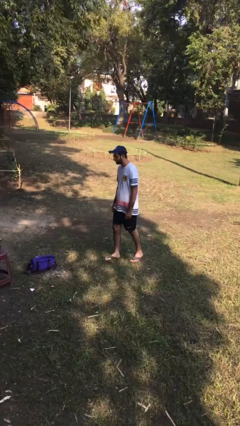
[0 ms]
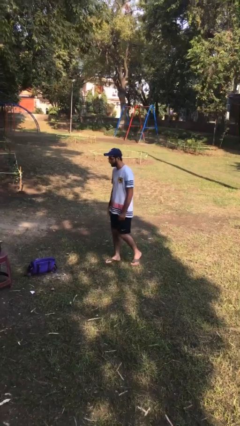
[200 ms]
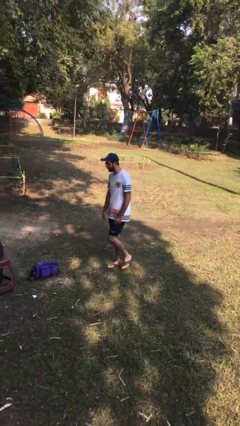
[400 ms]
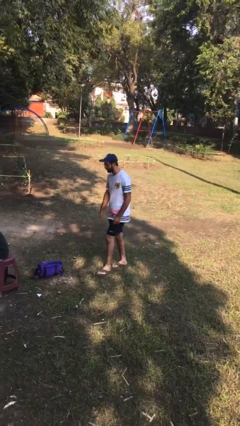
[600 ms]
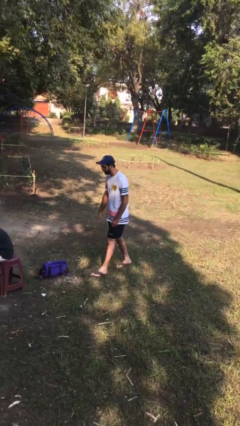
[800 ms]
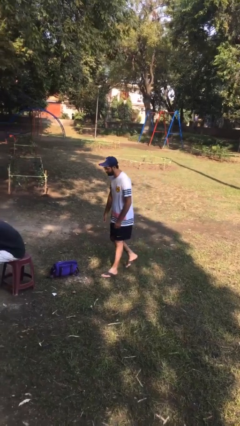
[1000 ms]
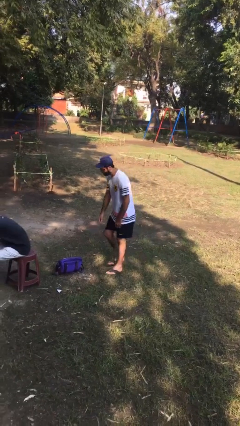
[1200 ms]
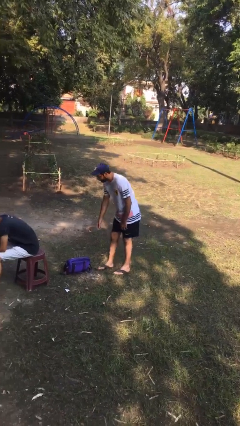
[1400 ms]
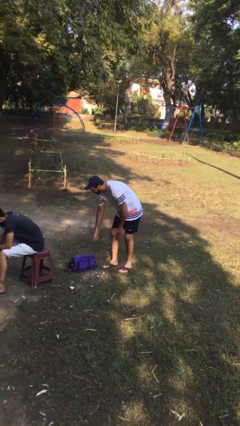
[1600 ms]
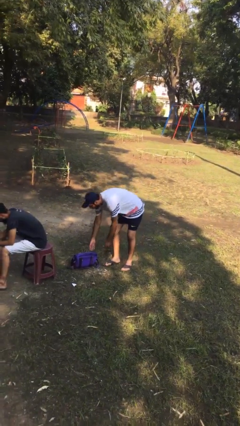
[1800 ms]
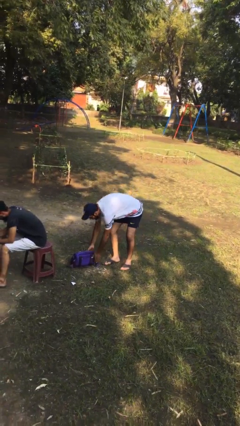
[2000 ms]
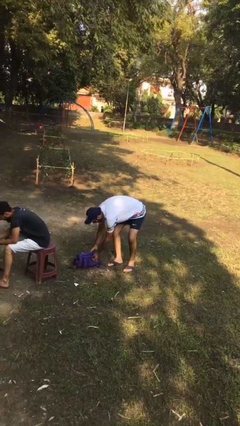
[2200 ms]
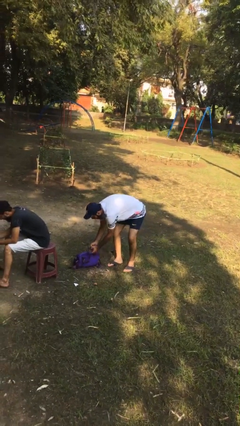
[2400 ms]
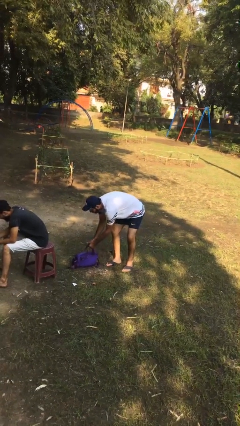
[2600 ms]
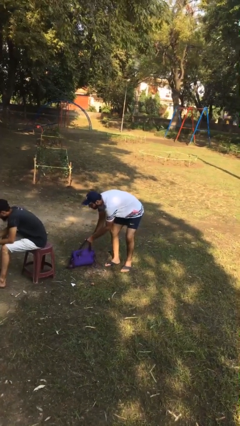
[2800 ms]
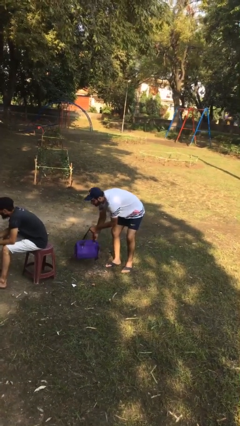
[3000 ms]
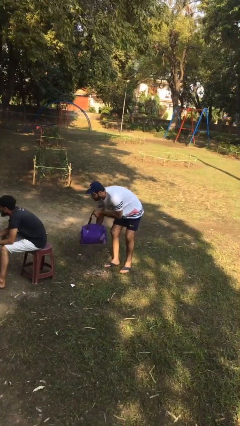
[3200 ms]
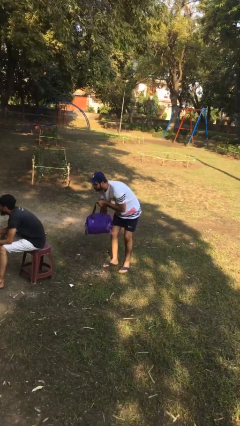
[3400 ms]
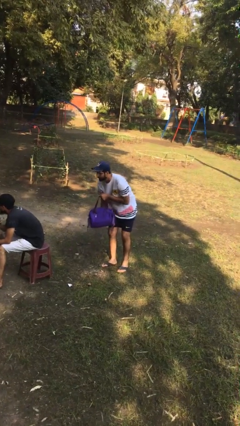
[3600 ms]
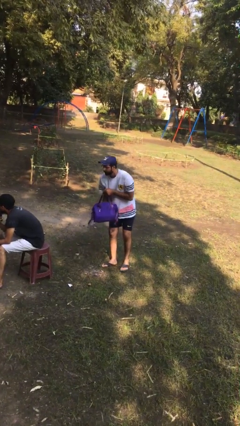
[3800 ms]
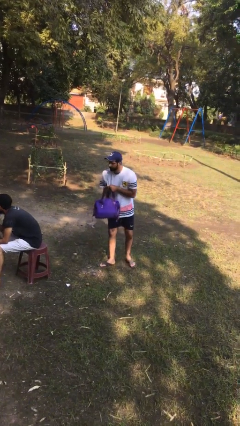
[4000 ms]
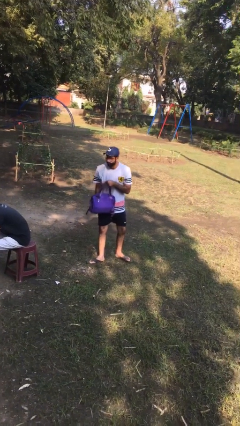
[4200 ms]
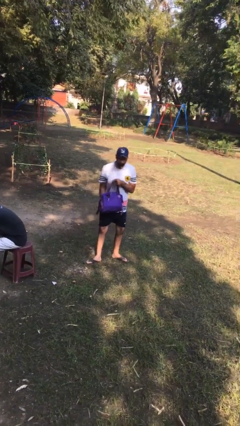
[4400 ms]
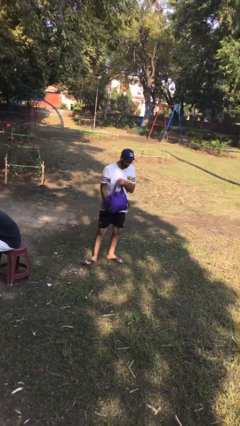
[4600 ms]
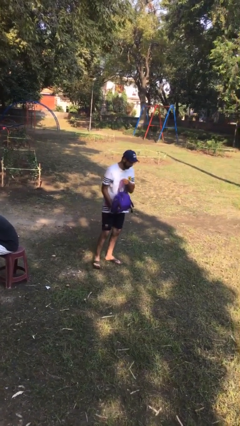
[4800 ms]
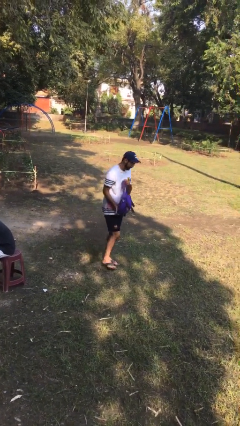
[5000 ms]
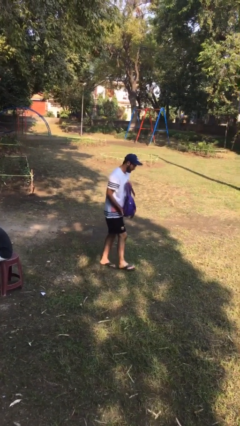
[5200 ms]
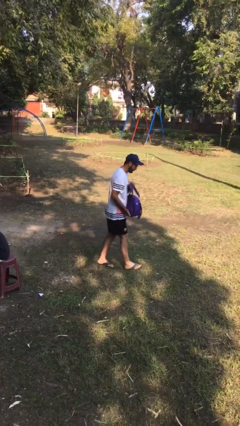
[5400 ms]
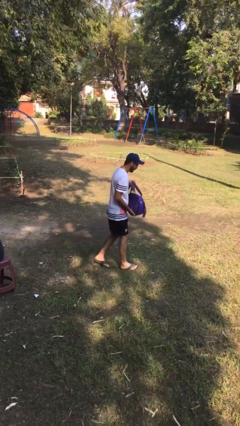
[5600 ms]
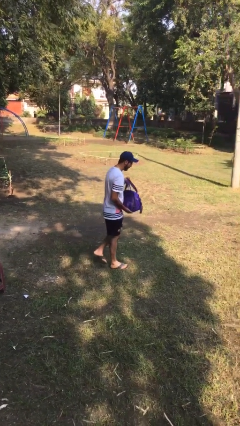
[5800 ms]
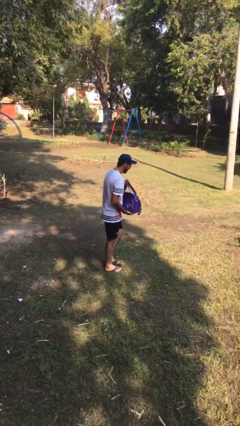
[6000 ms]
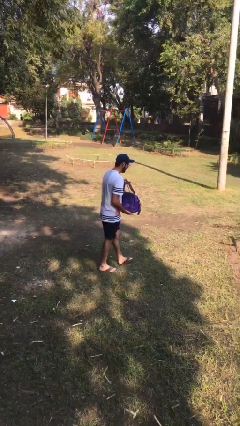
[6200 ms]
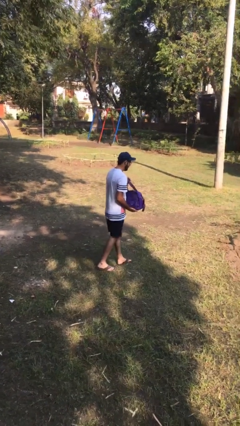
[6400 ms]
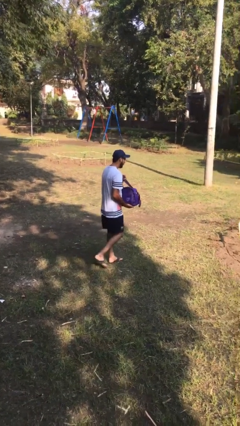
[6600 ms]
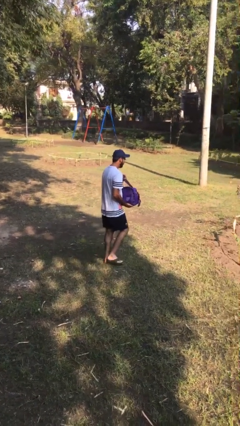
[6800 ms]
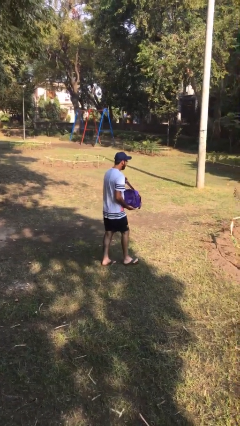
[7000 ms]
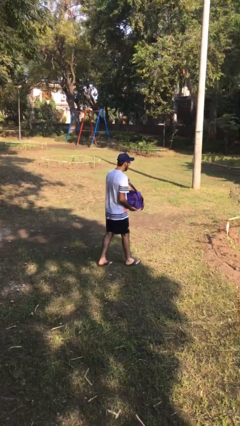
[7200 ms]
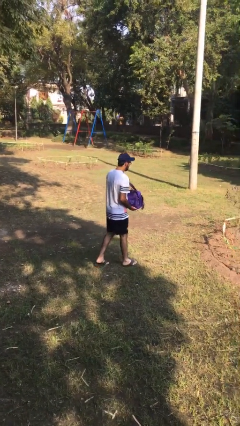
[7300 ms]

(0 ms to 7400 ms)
person steals object from person

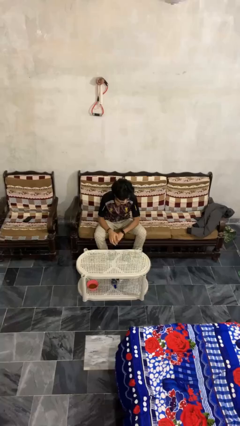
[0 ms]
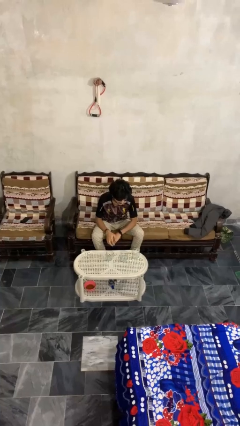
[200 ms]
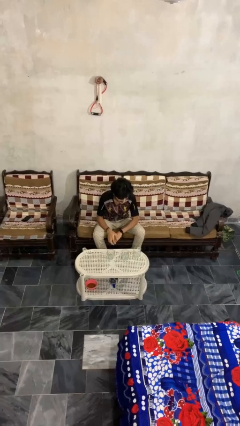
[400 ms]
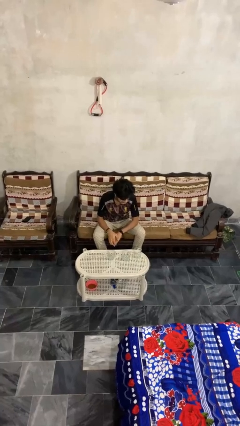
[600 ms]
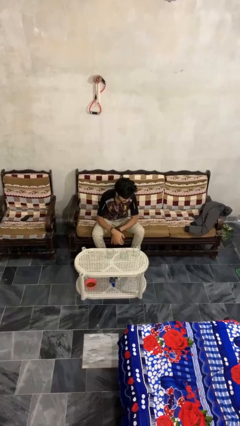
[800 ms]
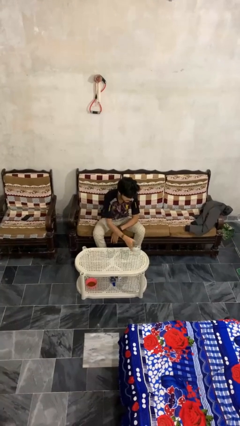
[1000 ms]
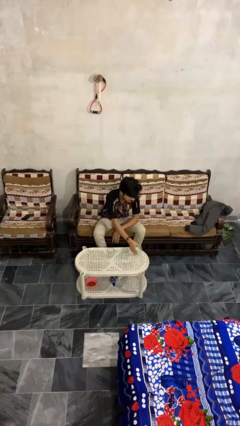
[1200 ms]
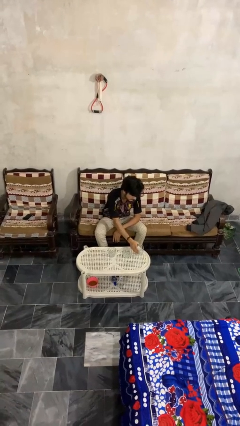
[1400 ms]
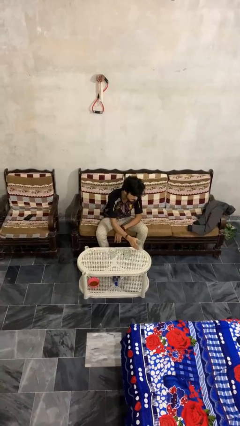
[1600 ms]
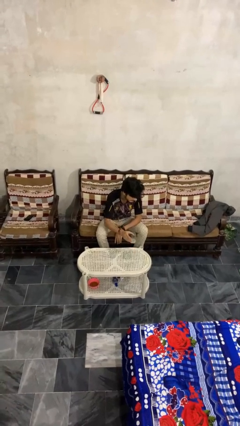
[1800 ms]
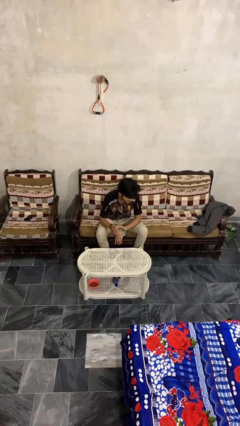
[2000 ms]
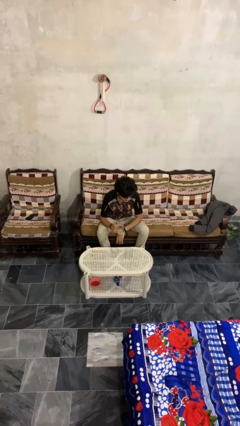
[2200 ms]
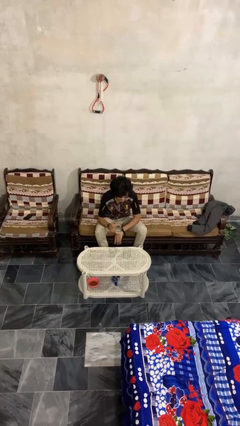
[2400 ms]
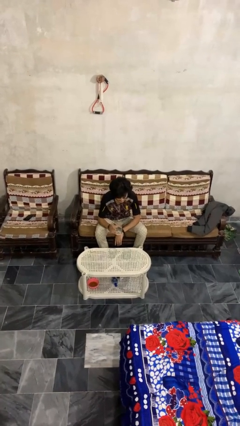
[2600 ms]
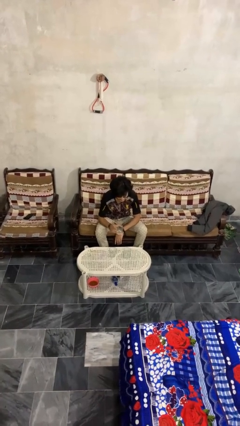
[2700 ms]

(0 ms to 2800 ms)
person picks up object from table

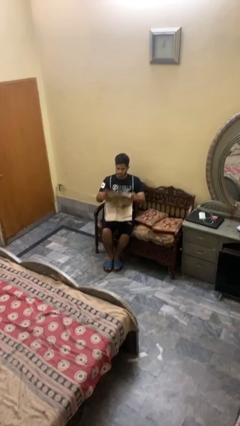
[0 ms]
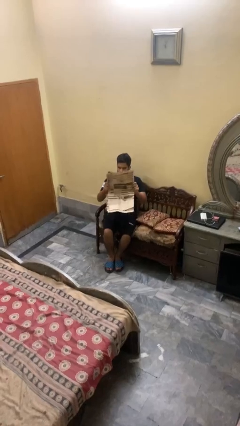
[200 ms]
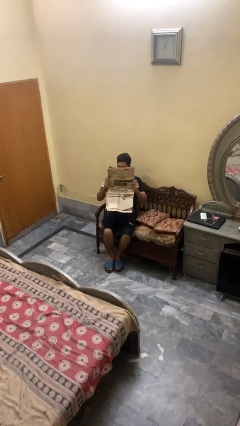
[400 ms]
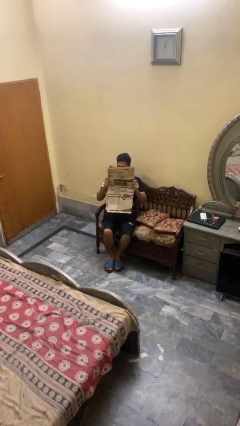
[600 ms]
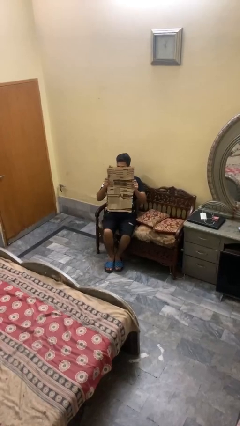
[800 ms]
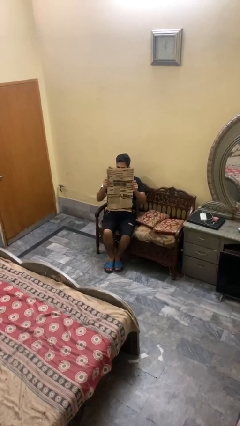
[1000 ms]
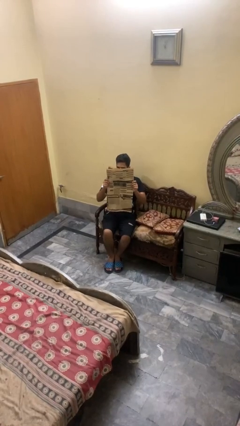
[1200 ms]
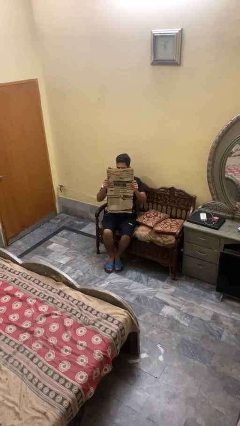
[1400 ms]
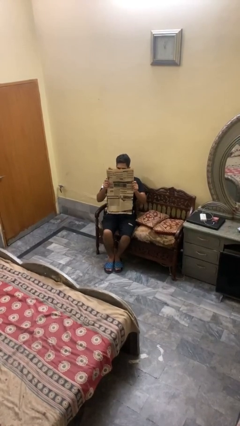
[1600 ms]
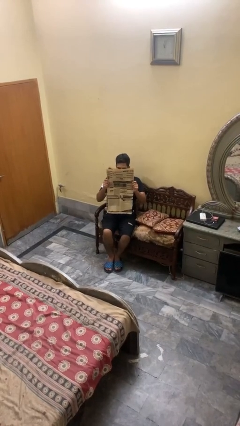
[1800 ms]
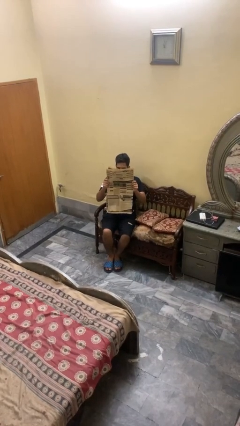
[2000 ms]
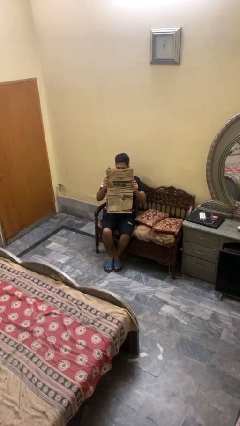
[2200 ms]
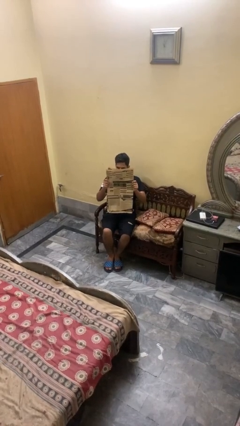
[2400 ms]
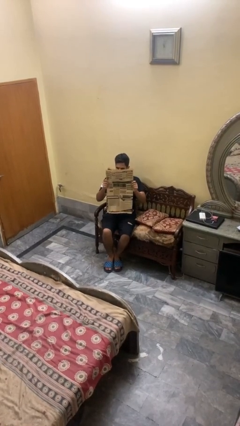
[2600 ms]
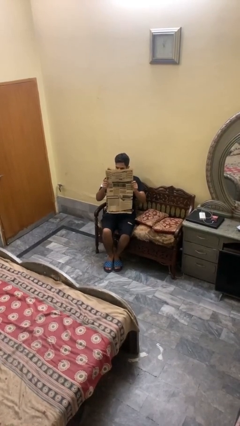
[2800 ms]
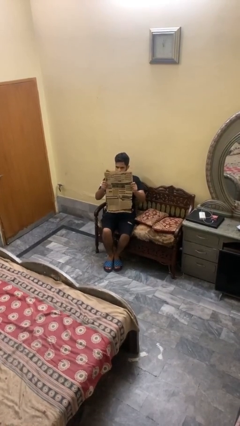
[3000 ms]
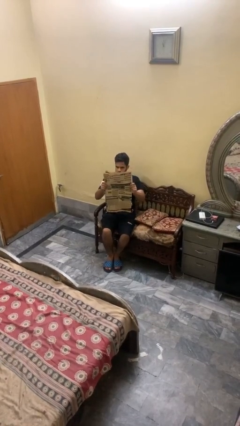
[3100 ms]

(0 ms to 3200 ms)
person reads newspaper

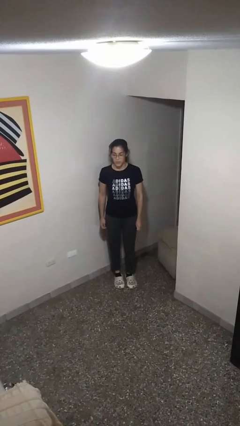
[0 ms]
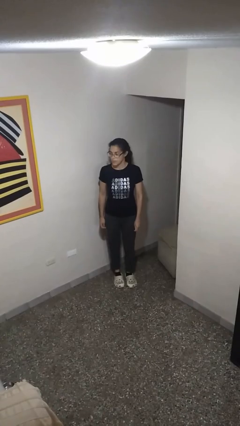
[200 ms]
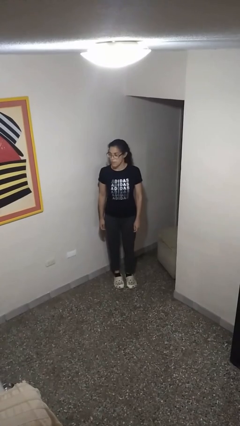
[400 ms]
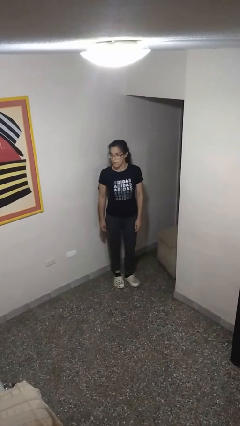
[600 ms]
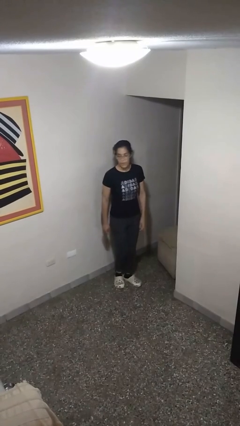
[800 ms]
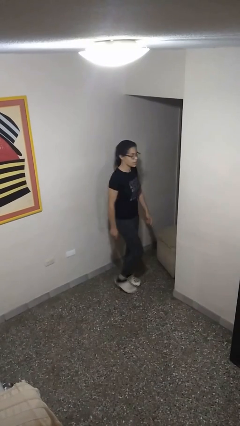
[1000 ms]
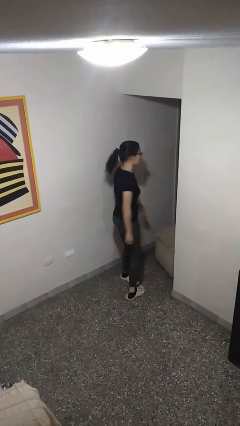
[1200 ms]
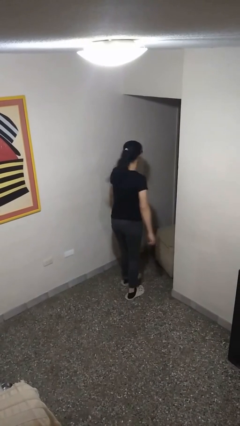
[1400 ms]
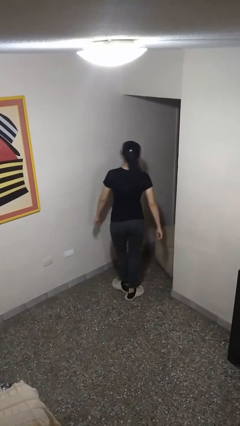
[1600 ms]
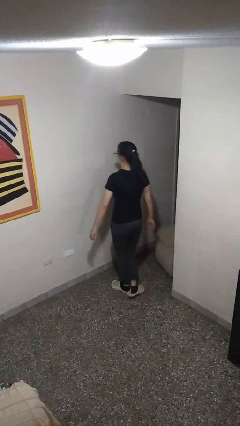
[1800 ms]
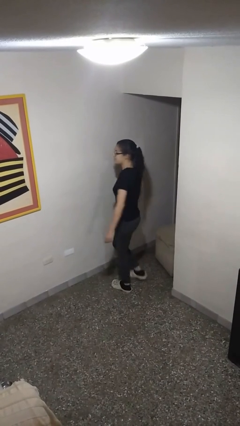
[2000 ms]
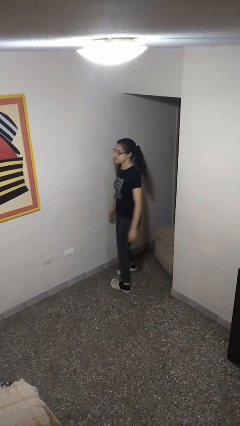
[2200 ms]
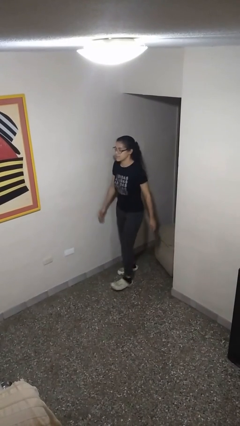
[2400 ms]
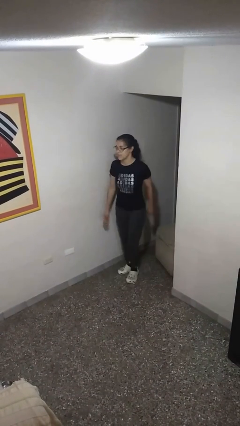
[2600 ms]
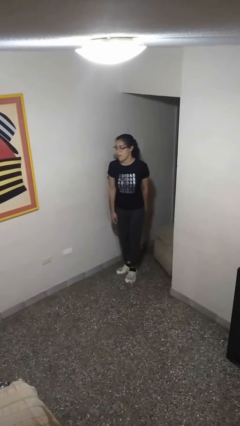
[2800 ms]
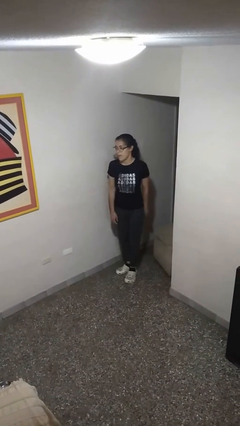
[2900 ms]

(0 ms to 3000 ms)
person twirls

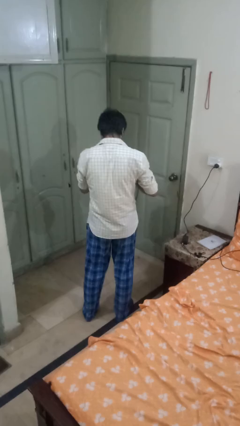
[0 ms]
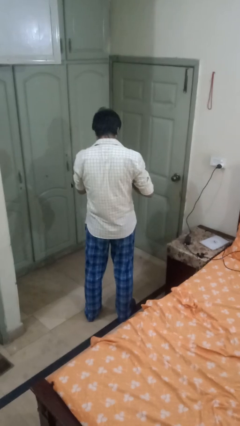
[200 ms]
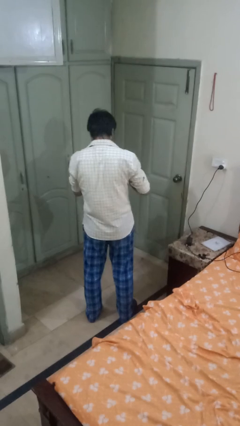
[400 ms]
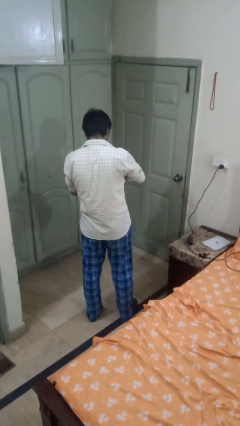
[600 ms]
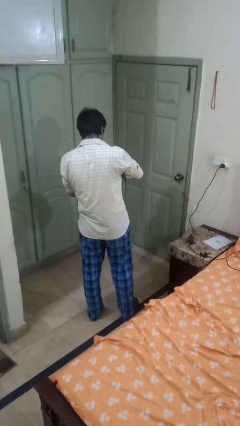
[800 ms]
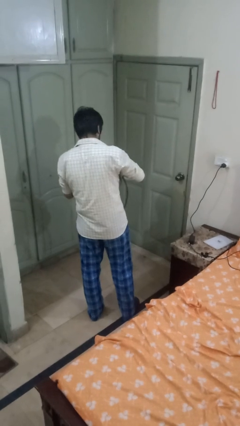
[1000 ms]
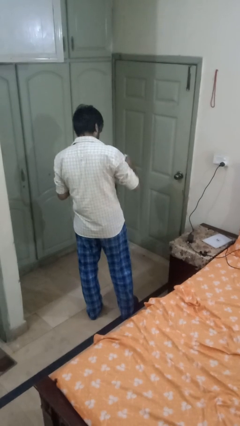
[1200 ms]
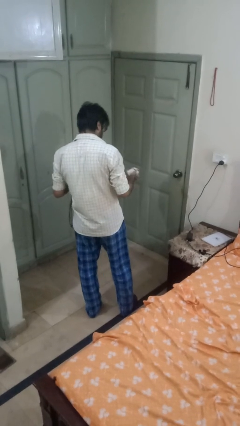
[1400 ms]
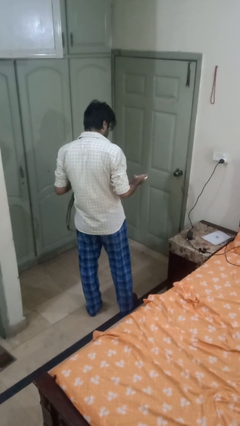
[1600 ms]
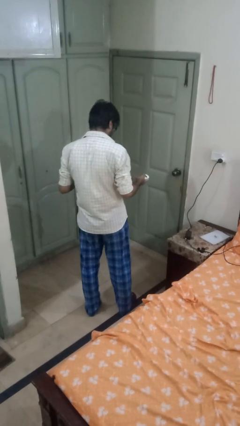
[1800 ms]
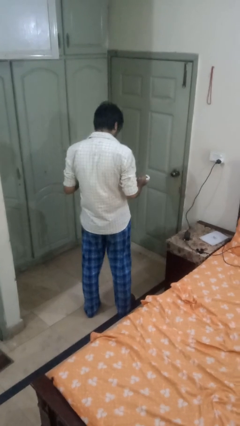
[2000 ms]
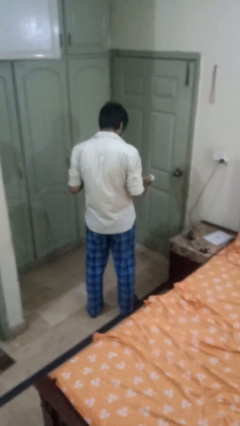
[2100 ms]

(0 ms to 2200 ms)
person takes object from purse
